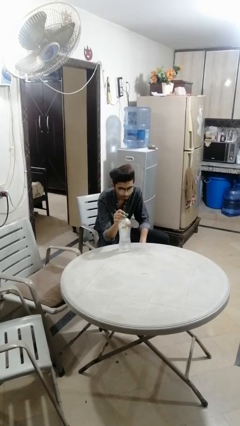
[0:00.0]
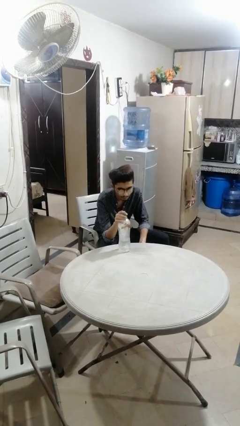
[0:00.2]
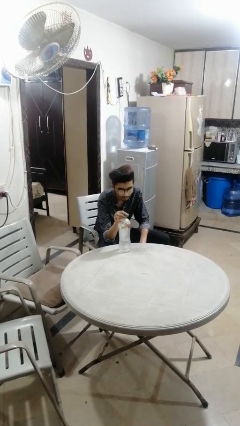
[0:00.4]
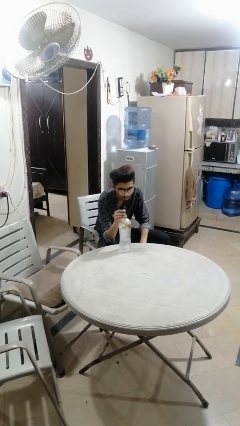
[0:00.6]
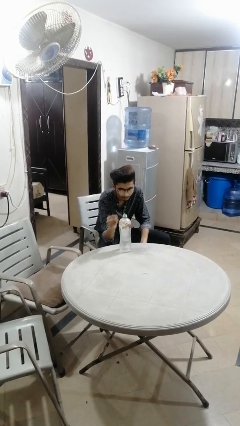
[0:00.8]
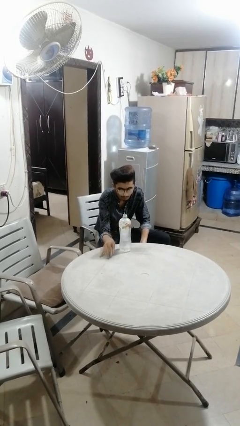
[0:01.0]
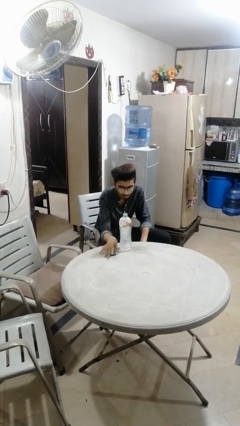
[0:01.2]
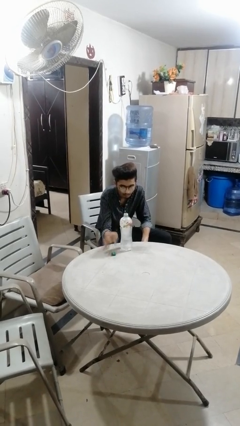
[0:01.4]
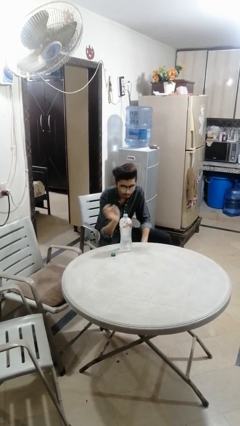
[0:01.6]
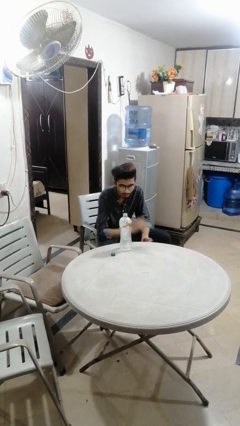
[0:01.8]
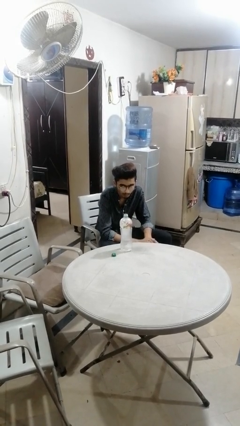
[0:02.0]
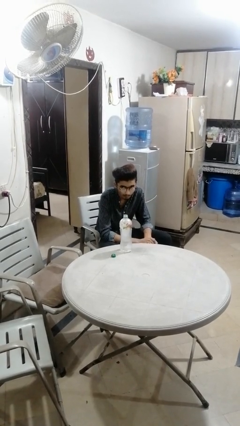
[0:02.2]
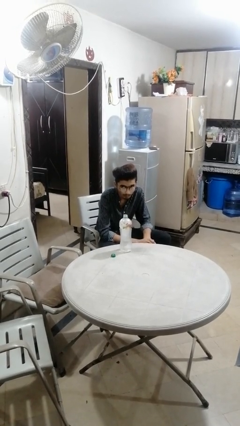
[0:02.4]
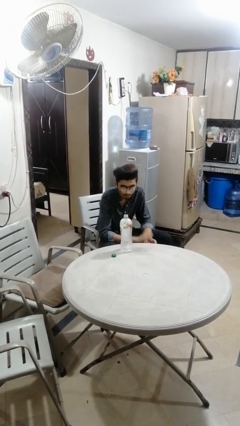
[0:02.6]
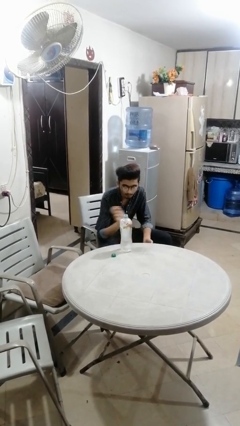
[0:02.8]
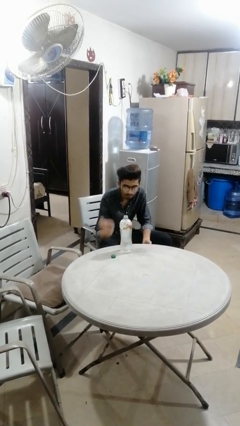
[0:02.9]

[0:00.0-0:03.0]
person unscrews lid from bottle

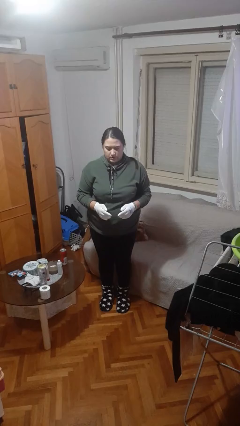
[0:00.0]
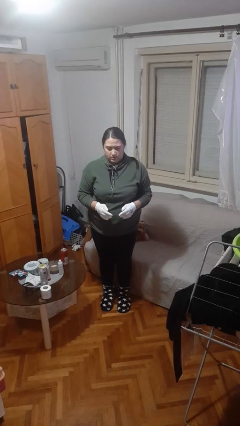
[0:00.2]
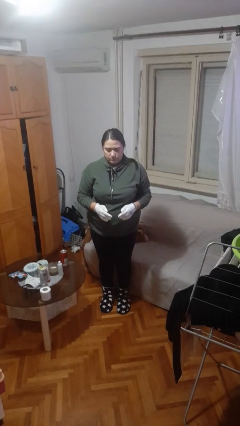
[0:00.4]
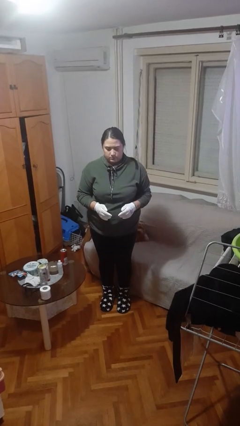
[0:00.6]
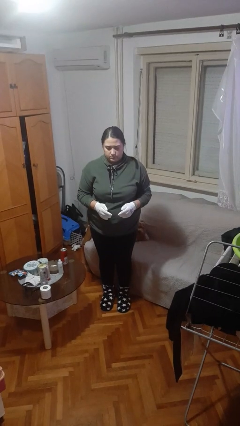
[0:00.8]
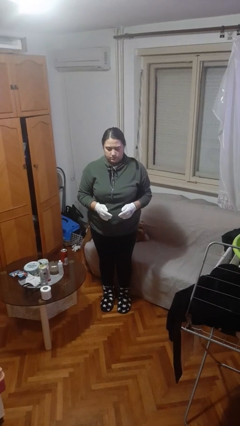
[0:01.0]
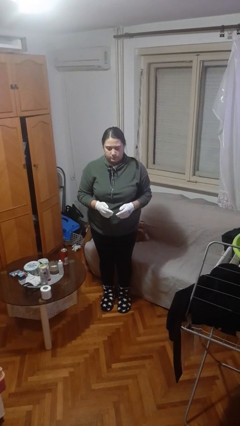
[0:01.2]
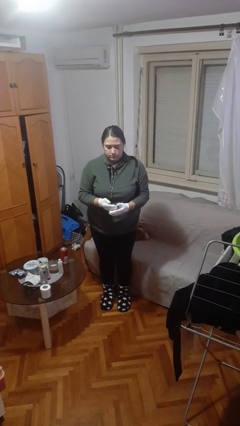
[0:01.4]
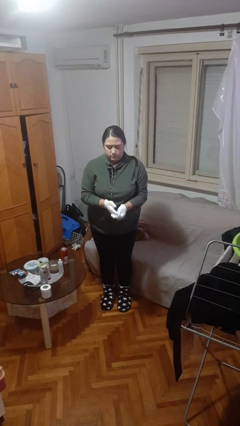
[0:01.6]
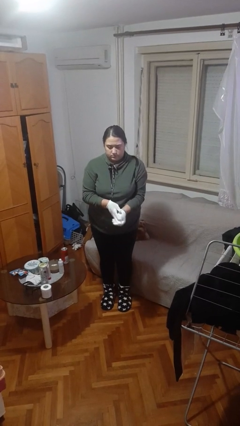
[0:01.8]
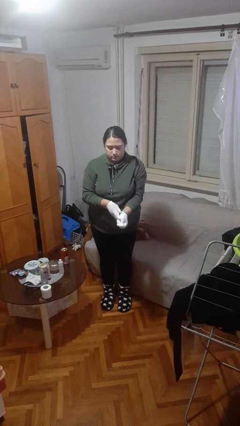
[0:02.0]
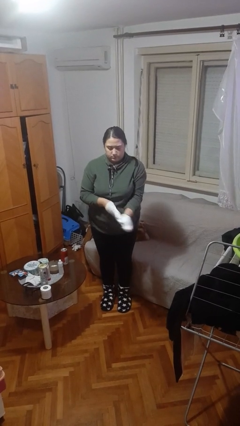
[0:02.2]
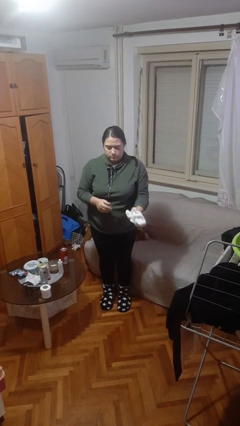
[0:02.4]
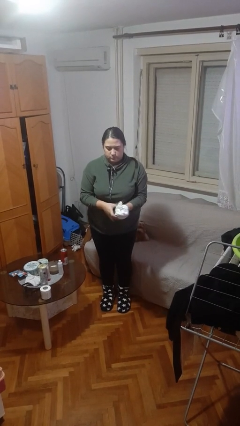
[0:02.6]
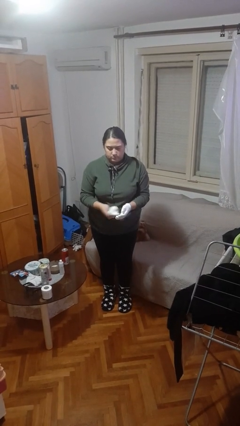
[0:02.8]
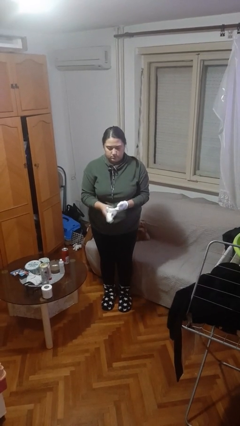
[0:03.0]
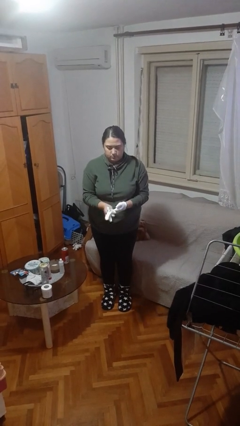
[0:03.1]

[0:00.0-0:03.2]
person takes off gloves

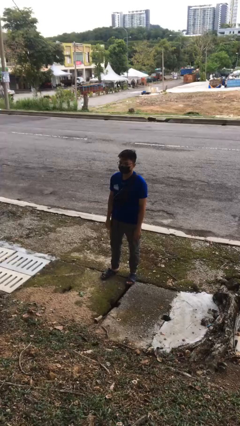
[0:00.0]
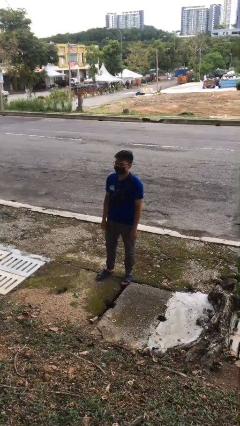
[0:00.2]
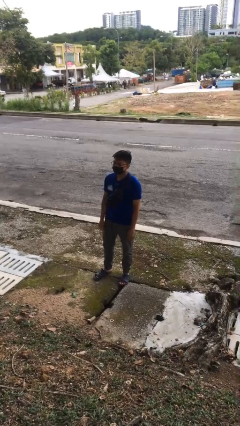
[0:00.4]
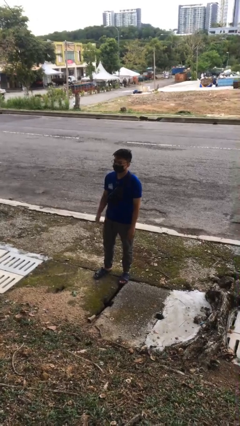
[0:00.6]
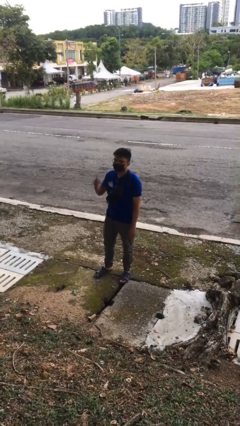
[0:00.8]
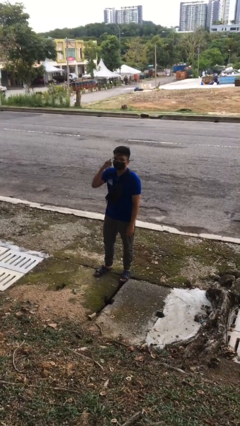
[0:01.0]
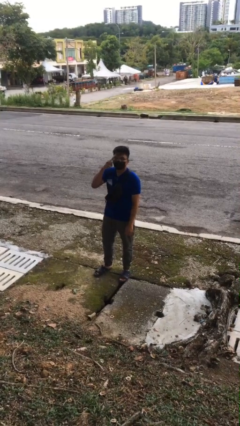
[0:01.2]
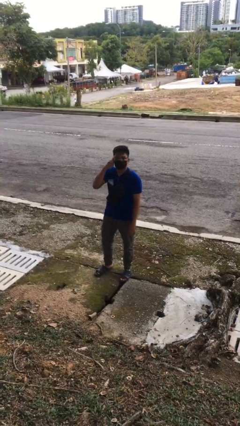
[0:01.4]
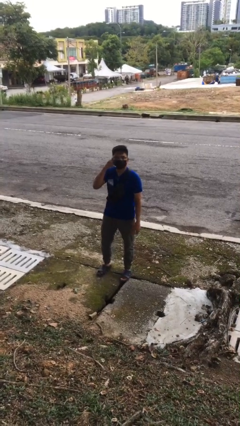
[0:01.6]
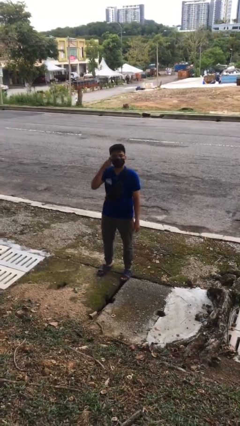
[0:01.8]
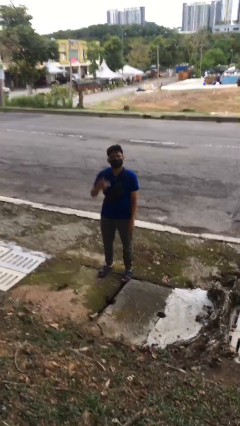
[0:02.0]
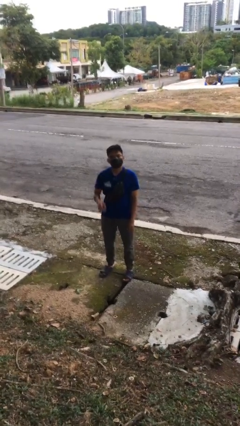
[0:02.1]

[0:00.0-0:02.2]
person gestures call me

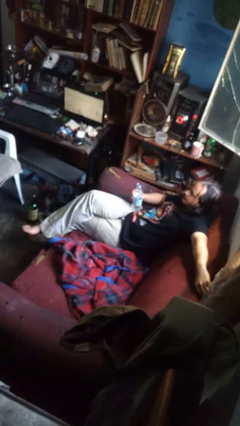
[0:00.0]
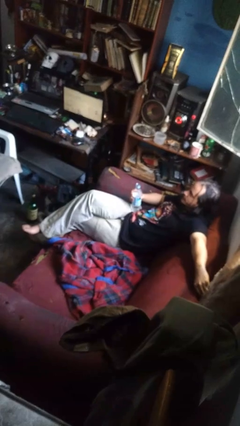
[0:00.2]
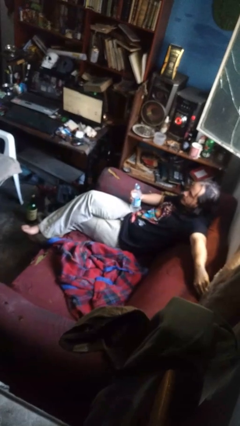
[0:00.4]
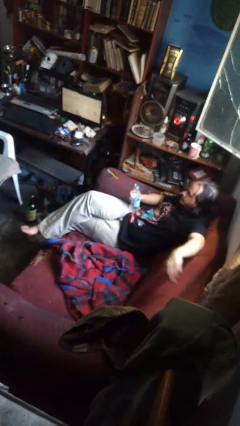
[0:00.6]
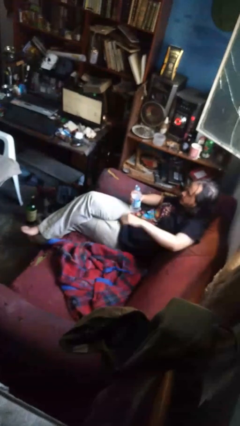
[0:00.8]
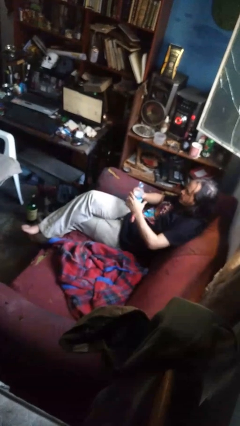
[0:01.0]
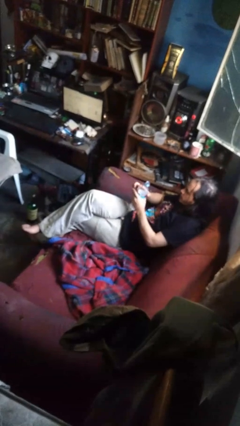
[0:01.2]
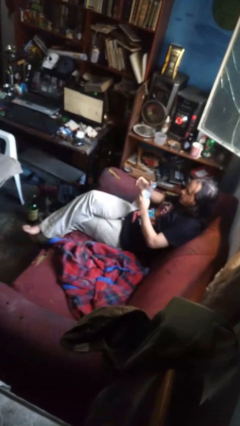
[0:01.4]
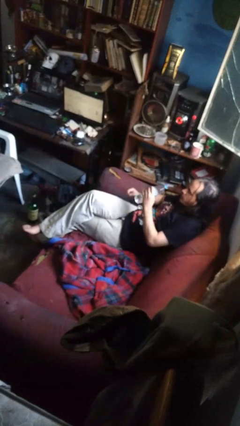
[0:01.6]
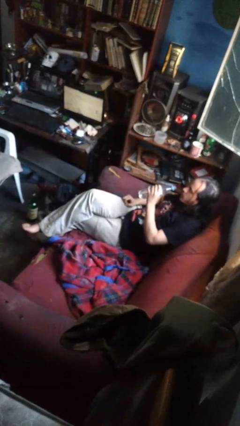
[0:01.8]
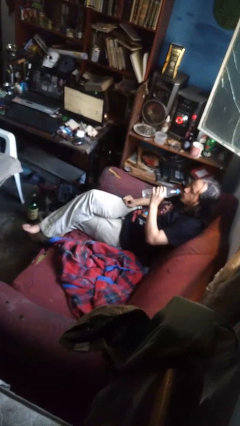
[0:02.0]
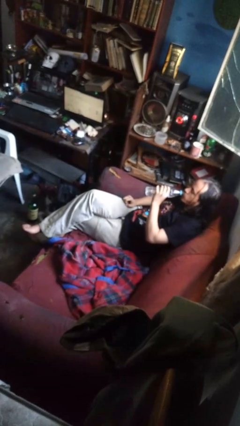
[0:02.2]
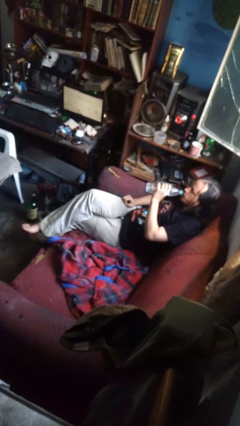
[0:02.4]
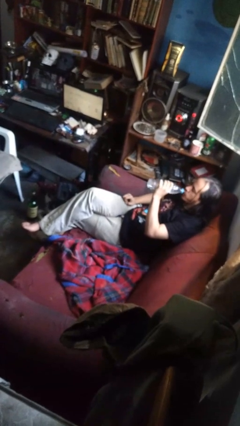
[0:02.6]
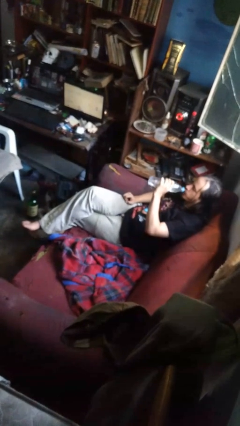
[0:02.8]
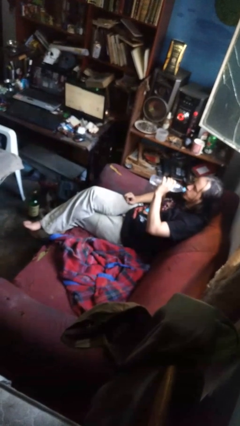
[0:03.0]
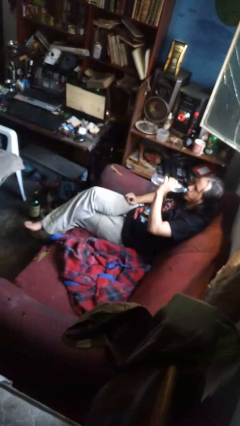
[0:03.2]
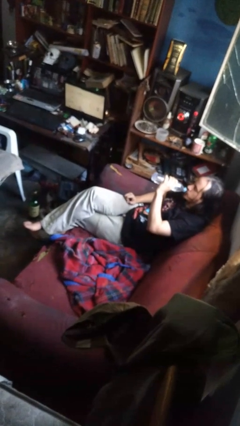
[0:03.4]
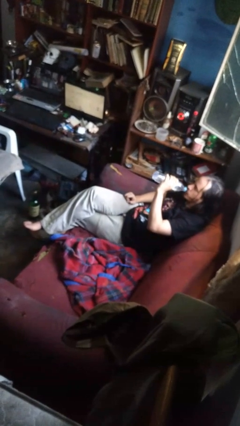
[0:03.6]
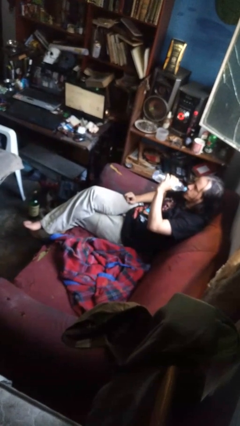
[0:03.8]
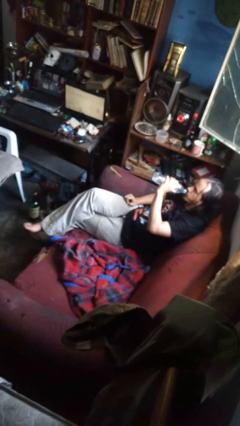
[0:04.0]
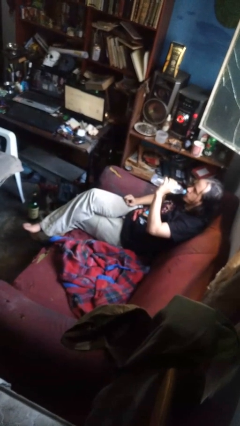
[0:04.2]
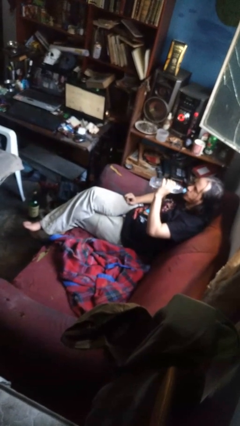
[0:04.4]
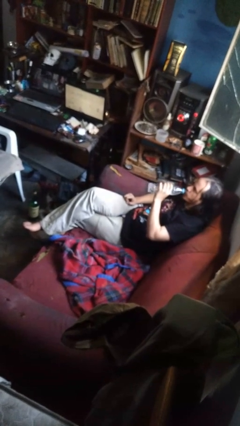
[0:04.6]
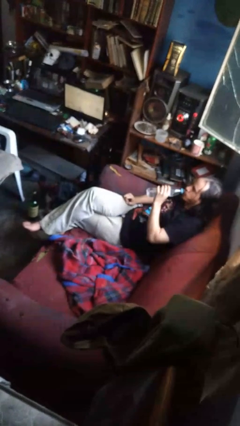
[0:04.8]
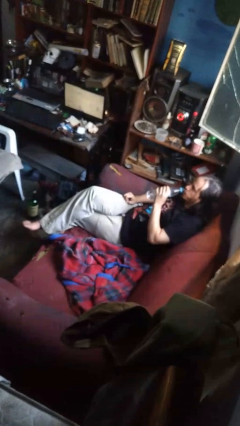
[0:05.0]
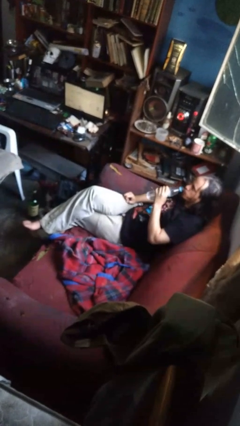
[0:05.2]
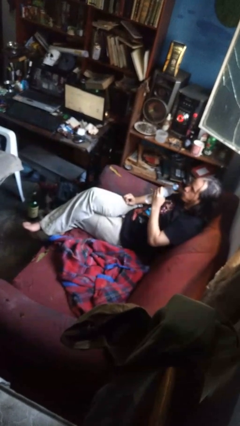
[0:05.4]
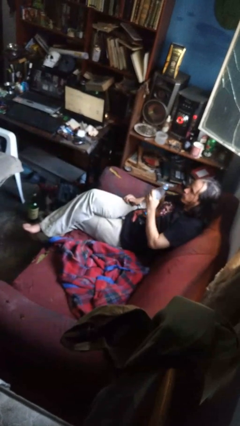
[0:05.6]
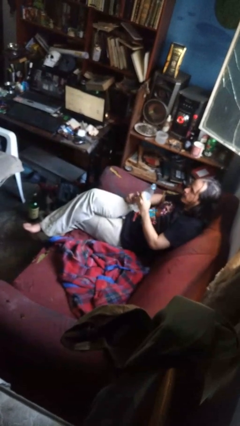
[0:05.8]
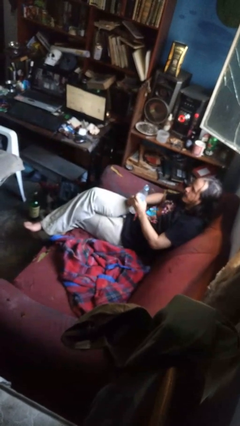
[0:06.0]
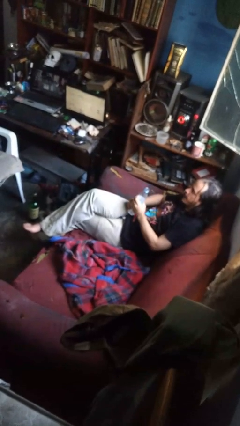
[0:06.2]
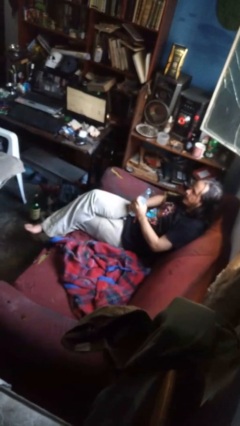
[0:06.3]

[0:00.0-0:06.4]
person drinks from bottle

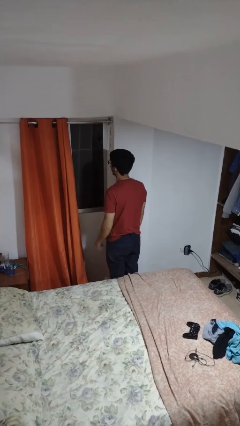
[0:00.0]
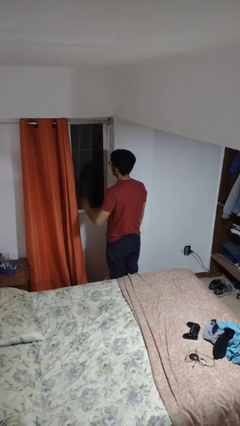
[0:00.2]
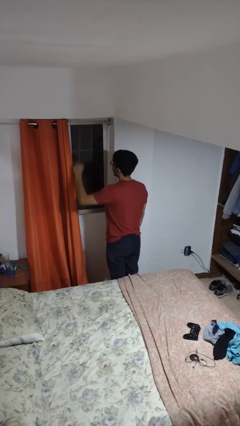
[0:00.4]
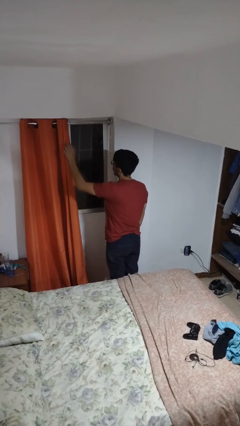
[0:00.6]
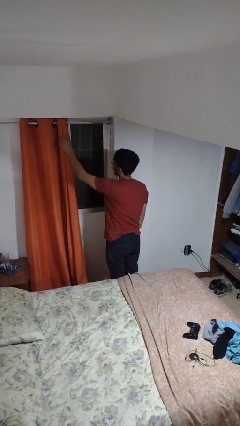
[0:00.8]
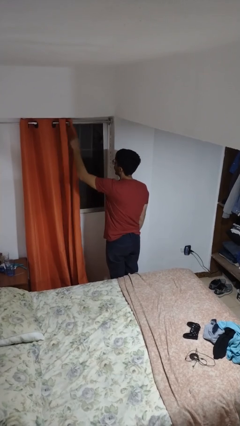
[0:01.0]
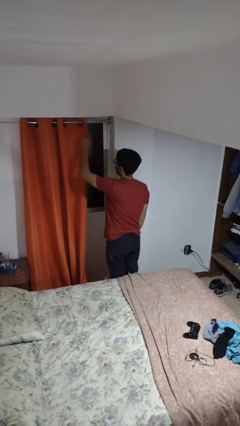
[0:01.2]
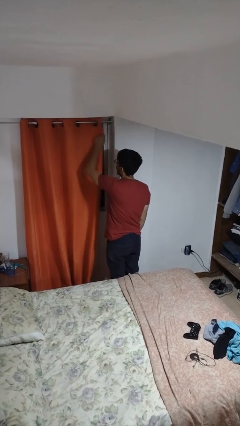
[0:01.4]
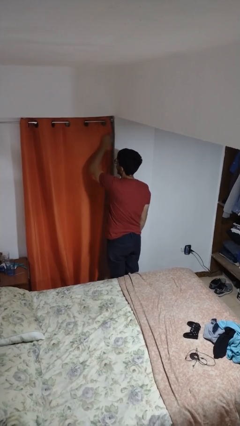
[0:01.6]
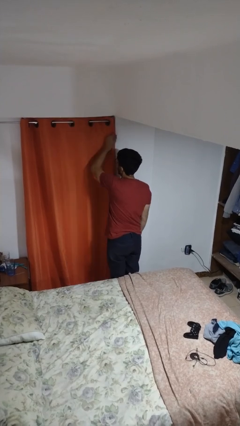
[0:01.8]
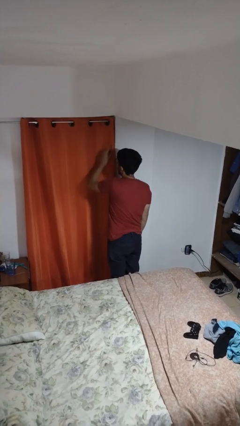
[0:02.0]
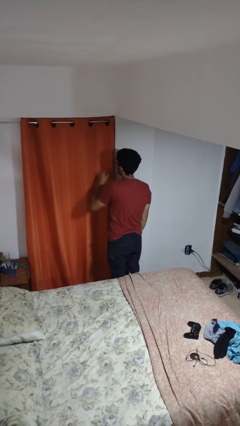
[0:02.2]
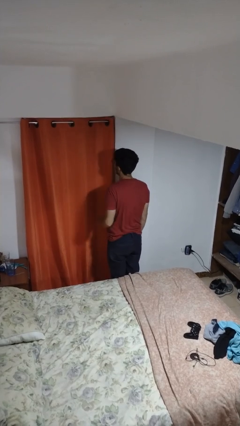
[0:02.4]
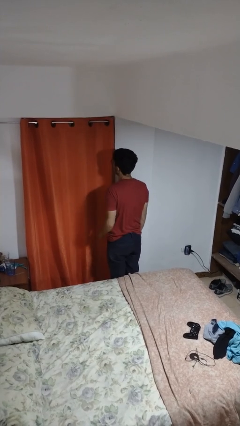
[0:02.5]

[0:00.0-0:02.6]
person closes curtains
